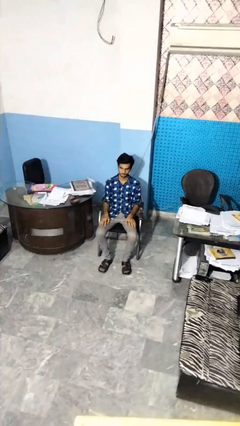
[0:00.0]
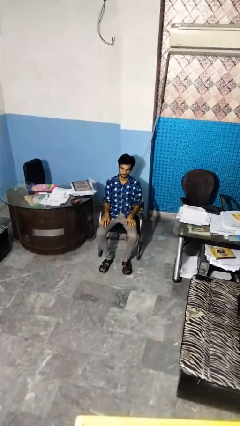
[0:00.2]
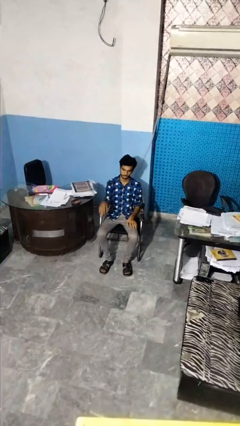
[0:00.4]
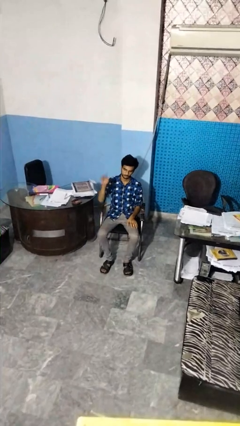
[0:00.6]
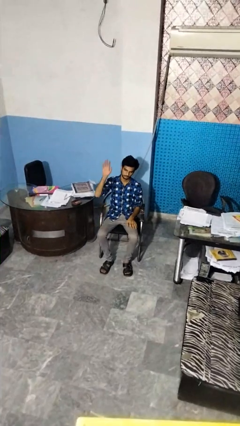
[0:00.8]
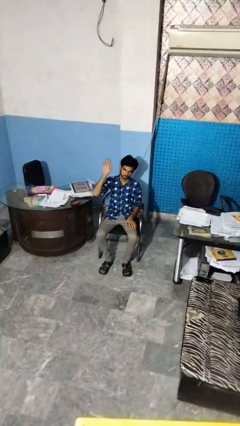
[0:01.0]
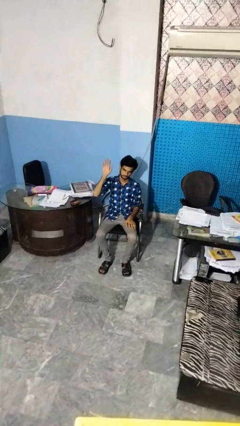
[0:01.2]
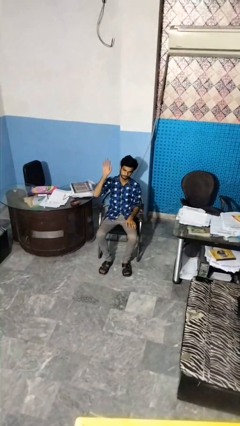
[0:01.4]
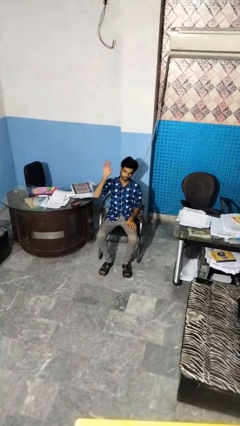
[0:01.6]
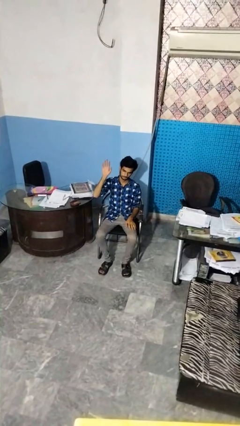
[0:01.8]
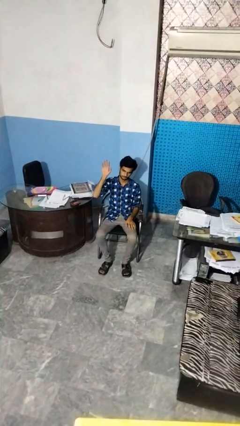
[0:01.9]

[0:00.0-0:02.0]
person gestures raise hand

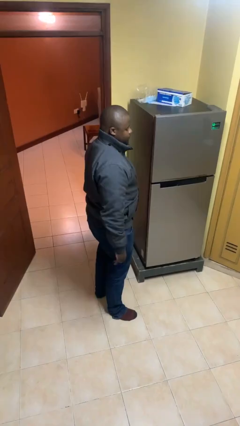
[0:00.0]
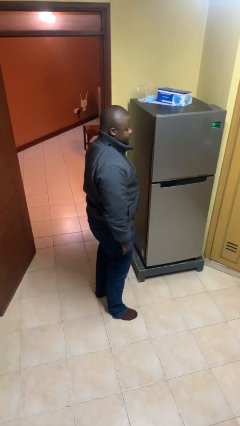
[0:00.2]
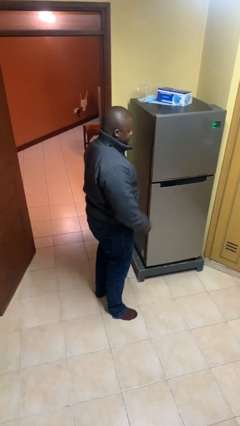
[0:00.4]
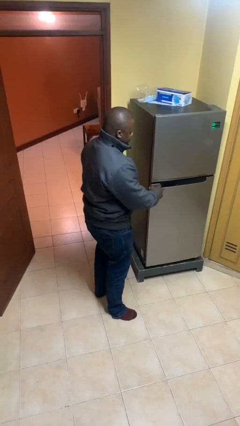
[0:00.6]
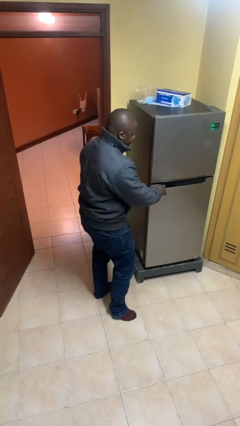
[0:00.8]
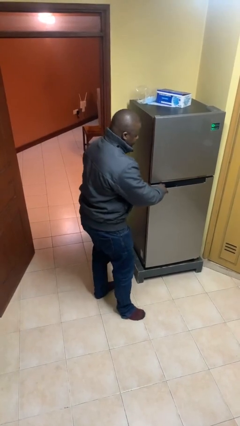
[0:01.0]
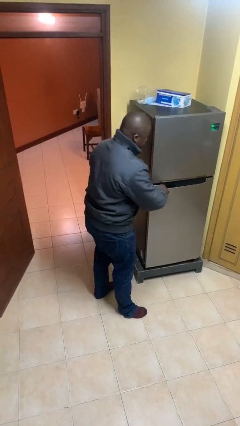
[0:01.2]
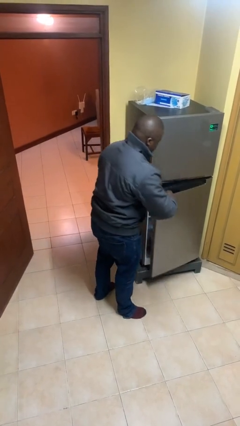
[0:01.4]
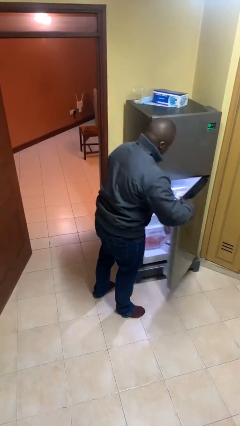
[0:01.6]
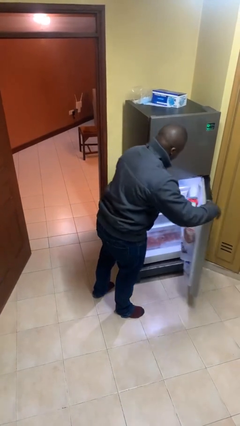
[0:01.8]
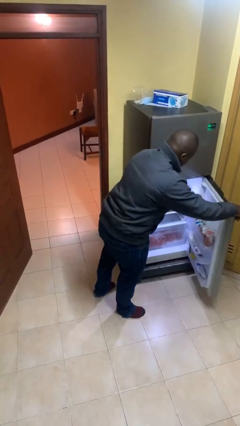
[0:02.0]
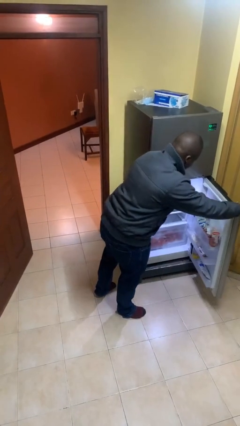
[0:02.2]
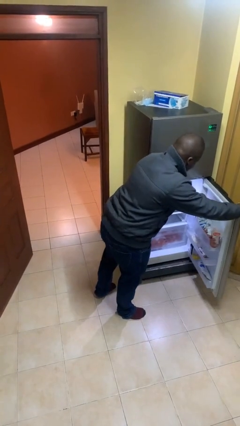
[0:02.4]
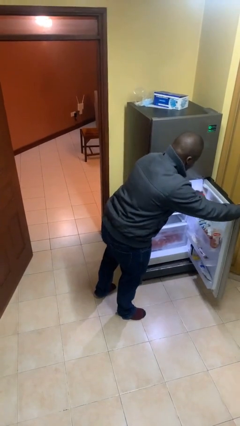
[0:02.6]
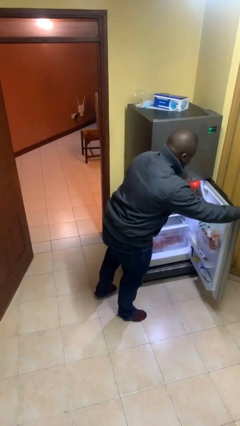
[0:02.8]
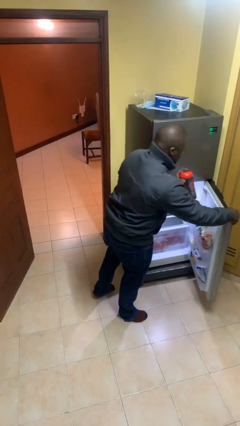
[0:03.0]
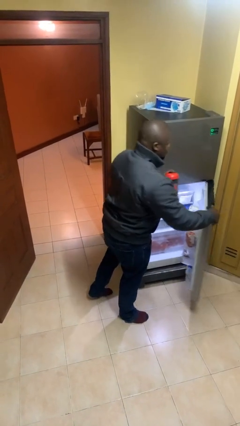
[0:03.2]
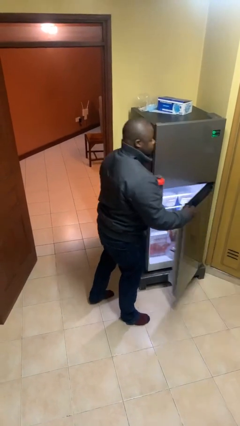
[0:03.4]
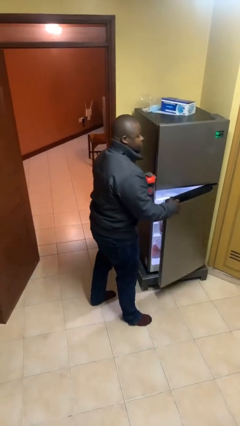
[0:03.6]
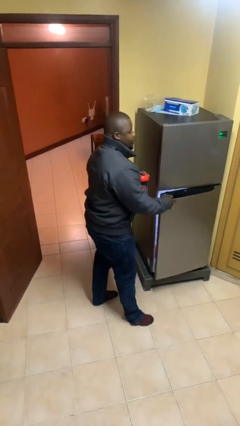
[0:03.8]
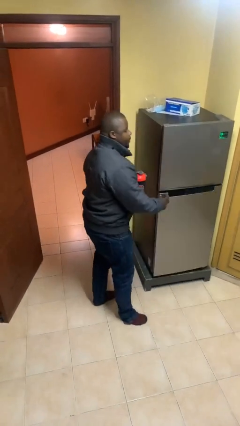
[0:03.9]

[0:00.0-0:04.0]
person takes object from refrigerator

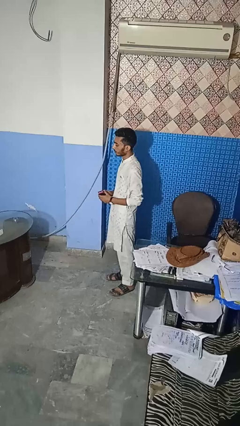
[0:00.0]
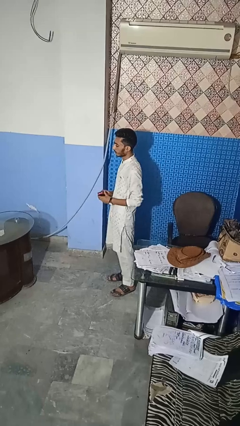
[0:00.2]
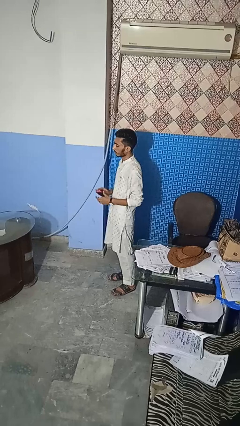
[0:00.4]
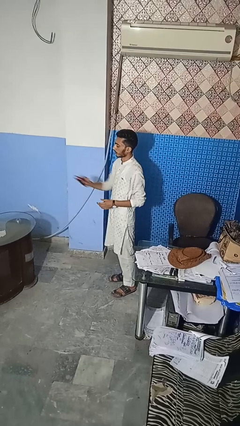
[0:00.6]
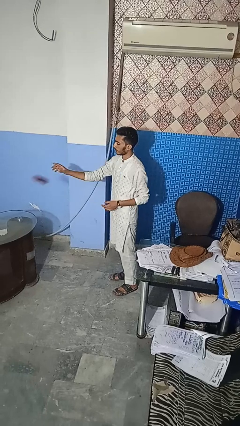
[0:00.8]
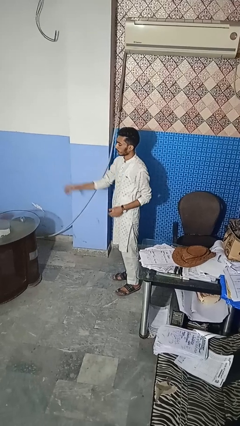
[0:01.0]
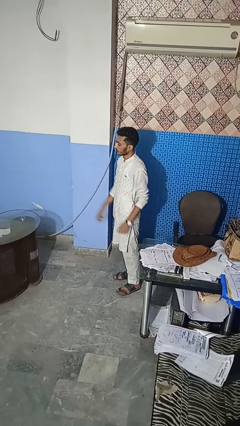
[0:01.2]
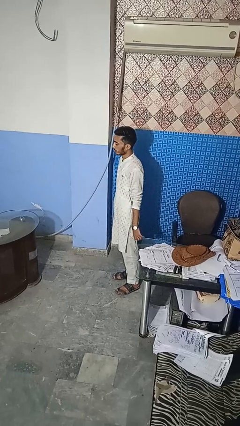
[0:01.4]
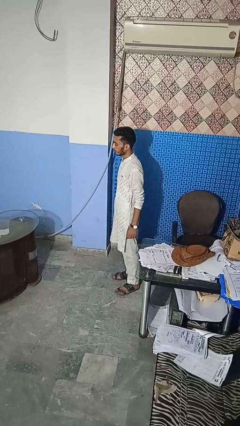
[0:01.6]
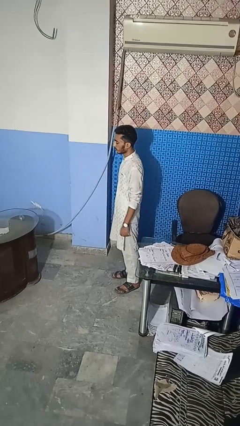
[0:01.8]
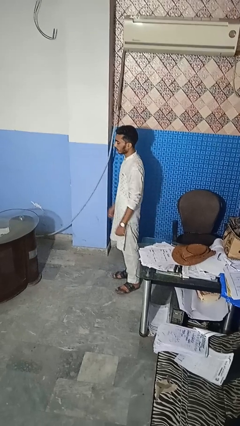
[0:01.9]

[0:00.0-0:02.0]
person throws object on table

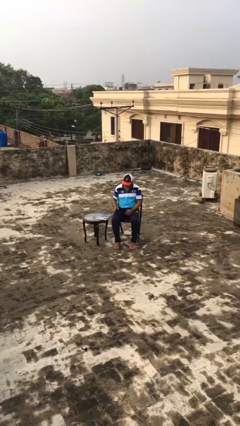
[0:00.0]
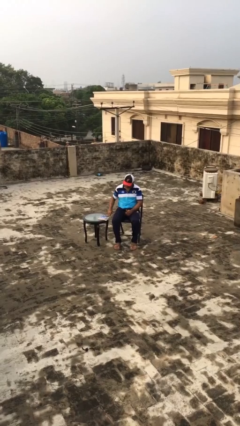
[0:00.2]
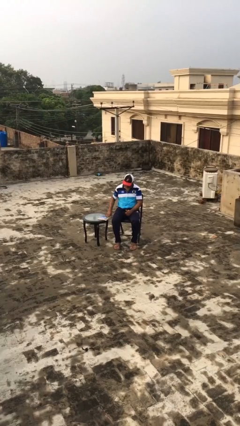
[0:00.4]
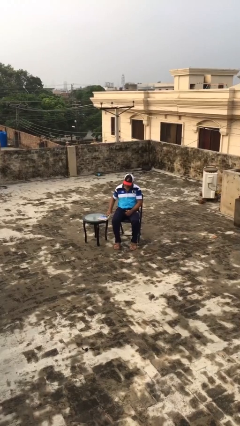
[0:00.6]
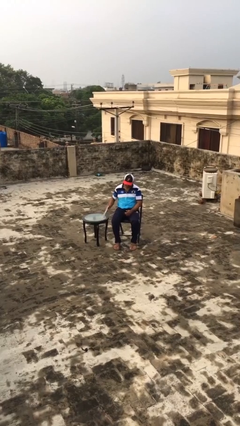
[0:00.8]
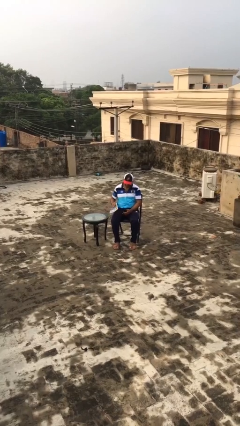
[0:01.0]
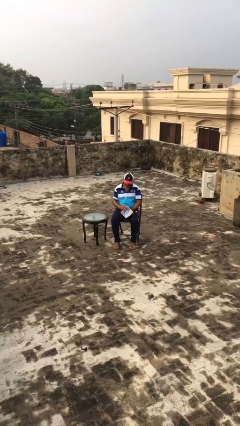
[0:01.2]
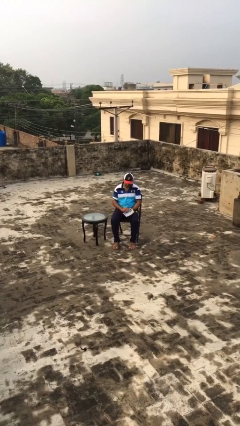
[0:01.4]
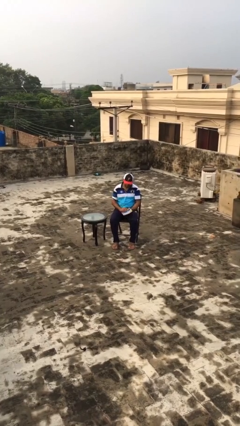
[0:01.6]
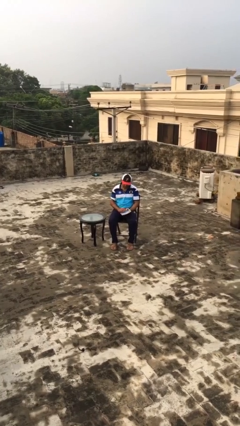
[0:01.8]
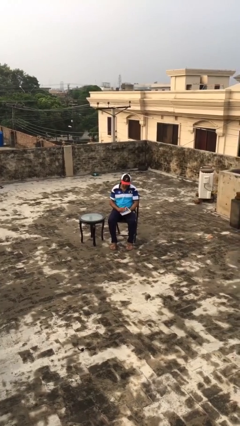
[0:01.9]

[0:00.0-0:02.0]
person picks up object from table

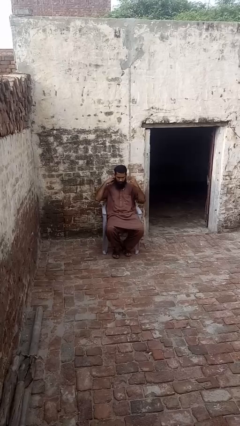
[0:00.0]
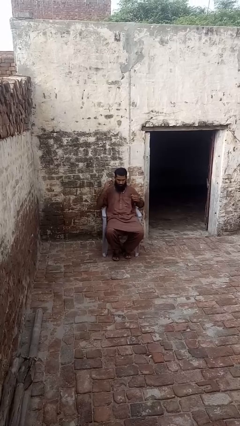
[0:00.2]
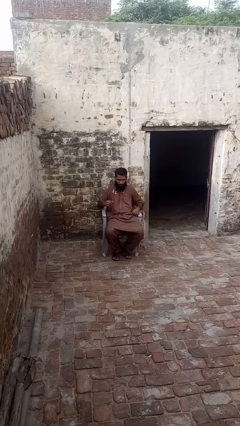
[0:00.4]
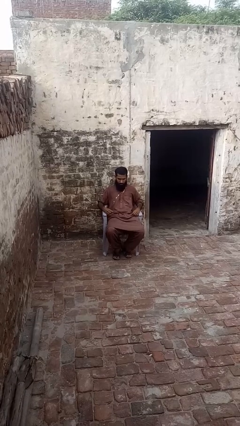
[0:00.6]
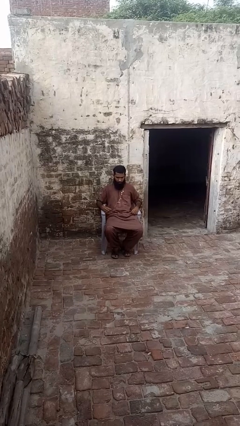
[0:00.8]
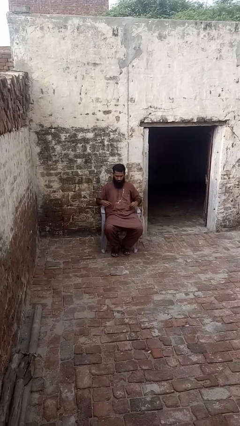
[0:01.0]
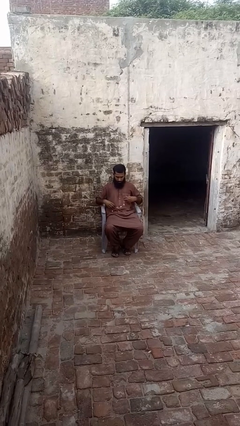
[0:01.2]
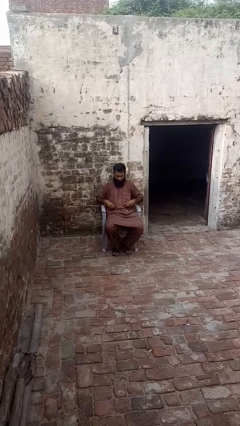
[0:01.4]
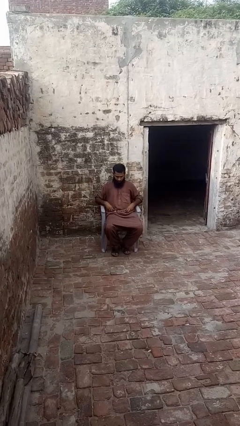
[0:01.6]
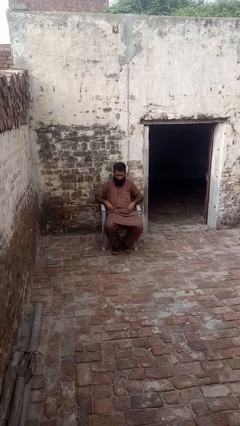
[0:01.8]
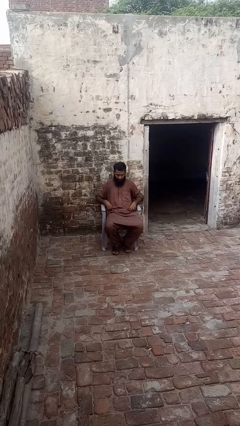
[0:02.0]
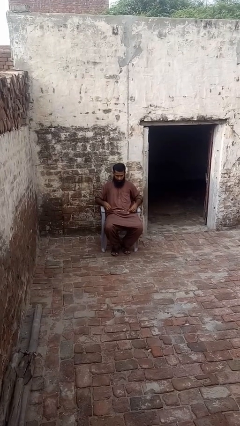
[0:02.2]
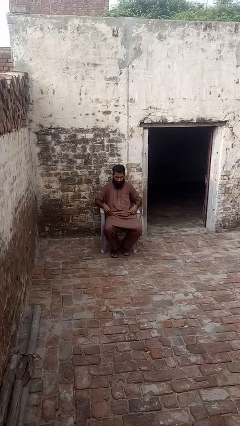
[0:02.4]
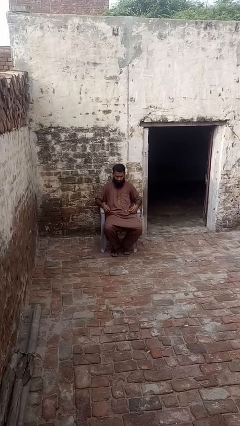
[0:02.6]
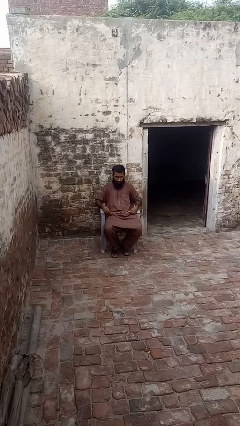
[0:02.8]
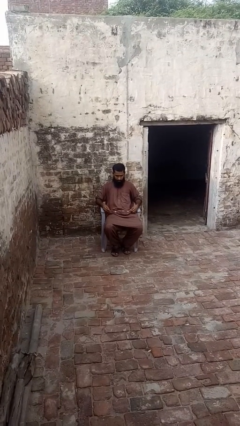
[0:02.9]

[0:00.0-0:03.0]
person takes off necklace

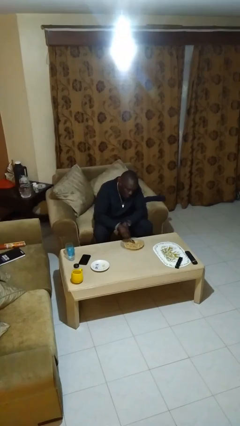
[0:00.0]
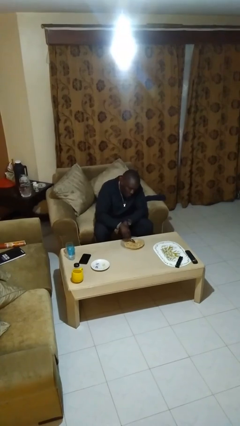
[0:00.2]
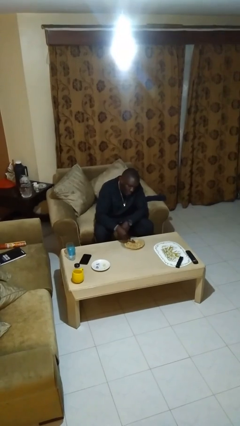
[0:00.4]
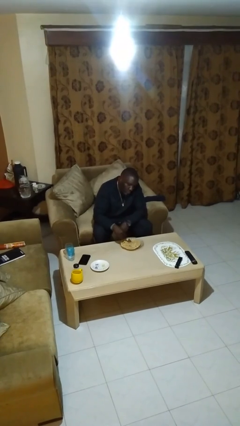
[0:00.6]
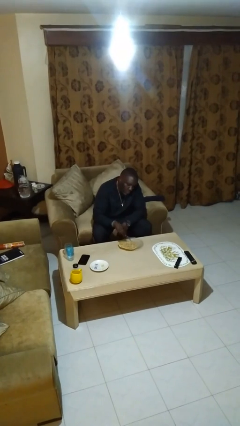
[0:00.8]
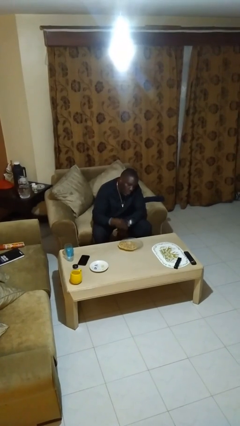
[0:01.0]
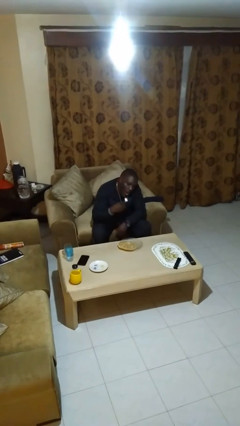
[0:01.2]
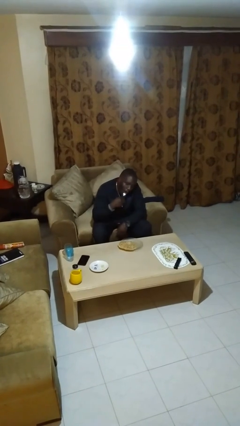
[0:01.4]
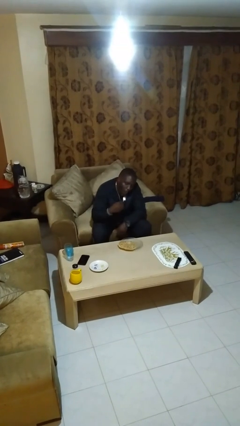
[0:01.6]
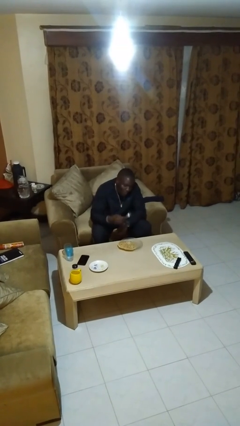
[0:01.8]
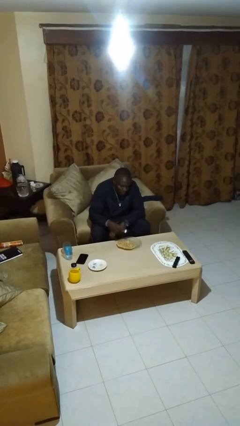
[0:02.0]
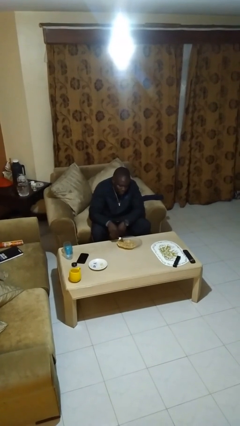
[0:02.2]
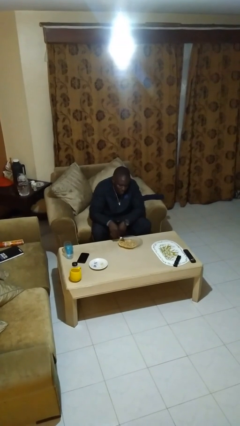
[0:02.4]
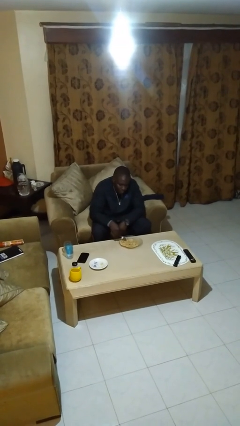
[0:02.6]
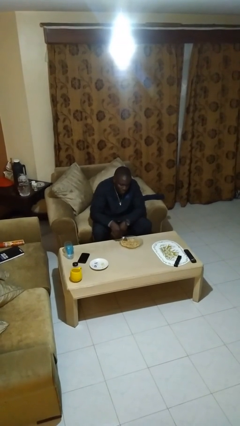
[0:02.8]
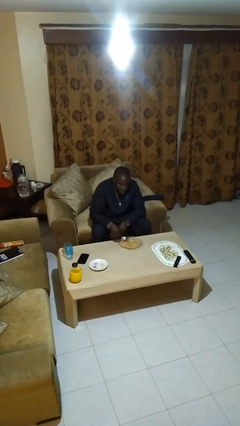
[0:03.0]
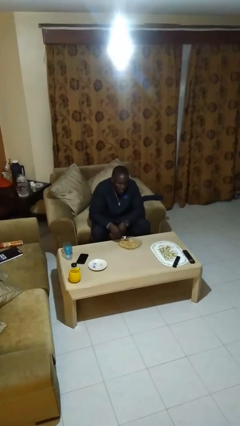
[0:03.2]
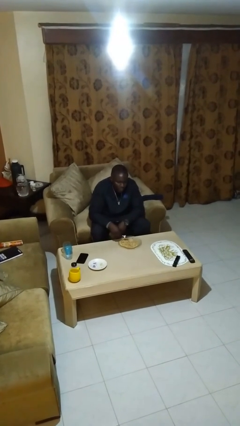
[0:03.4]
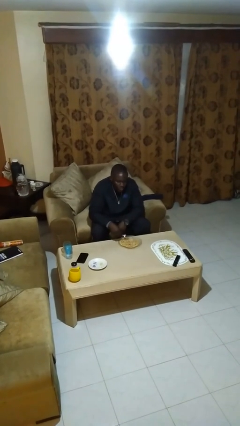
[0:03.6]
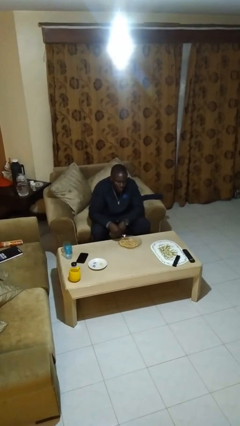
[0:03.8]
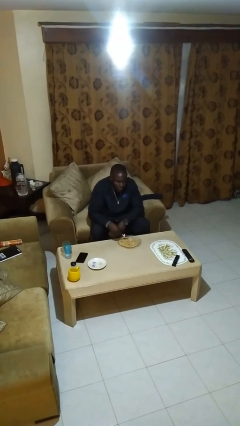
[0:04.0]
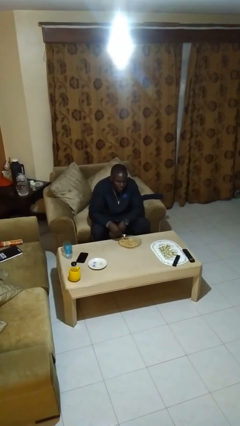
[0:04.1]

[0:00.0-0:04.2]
person eats with utensil

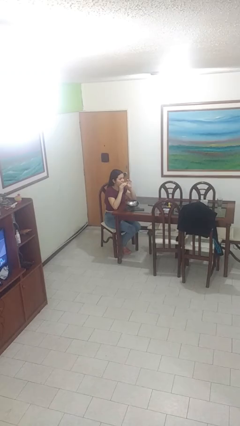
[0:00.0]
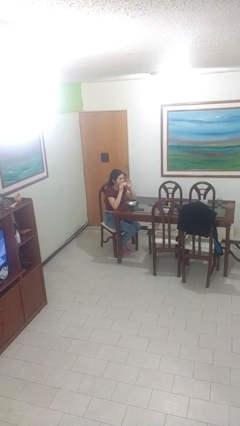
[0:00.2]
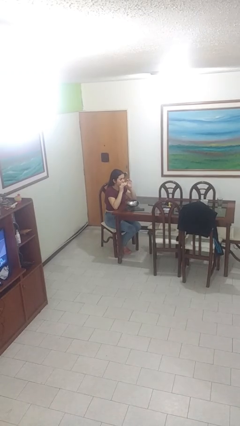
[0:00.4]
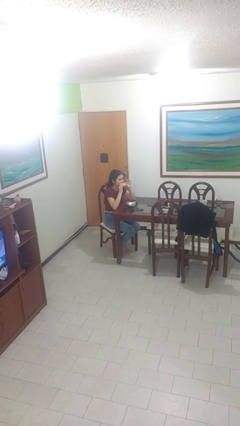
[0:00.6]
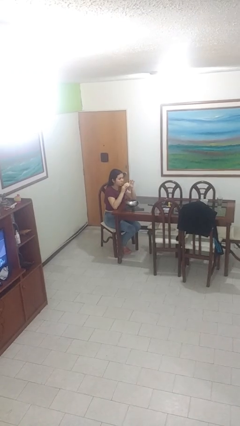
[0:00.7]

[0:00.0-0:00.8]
person eats with hands
